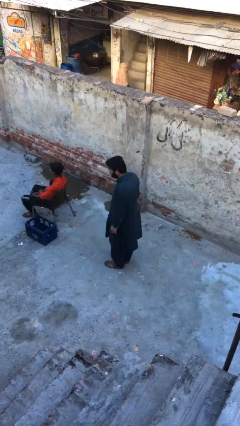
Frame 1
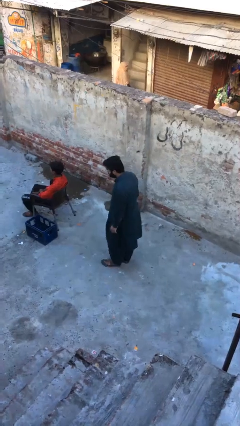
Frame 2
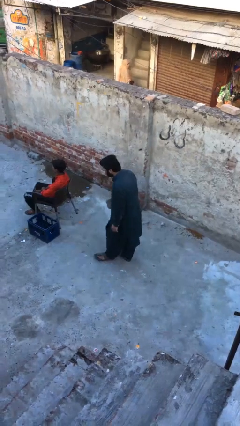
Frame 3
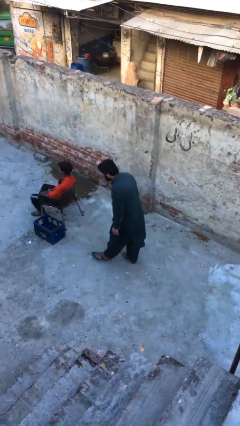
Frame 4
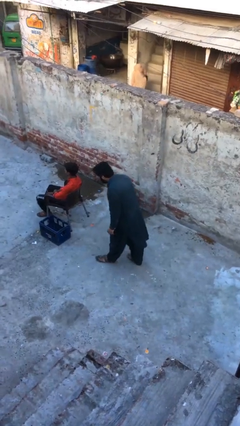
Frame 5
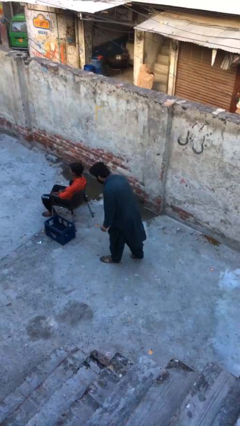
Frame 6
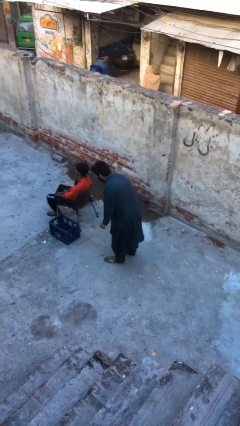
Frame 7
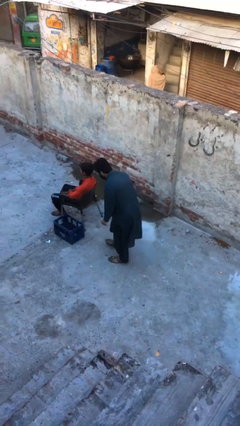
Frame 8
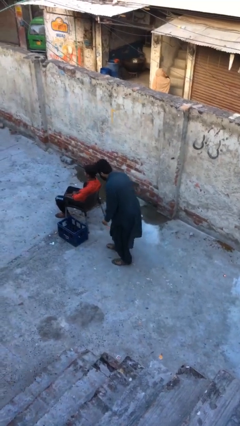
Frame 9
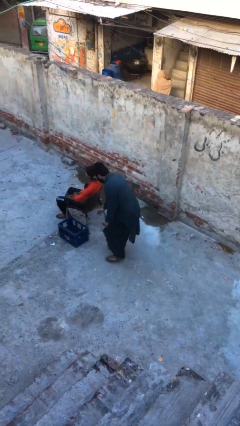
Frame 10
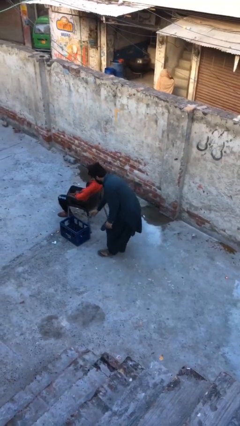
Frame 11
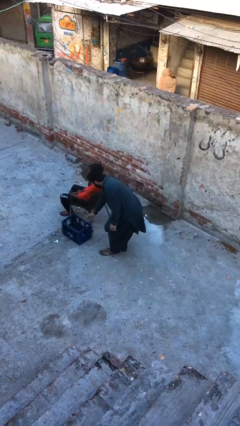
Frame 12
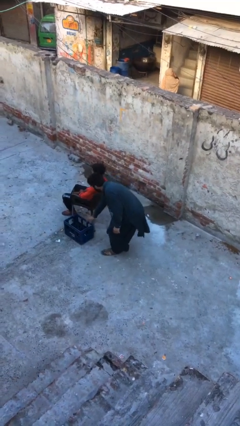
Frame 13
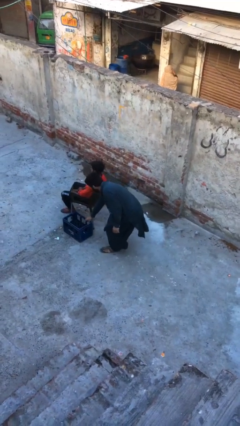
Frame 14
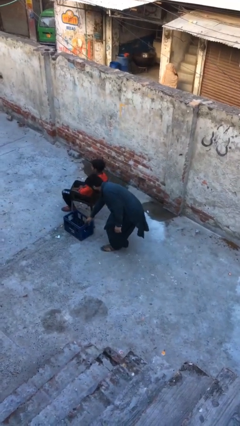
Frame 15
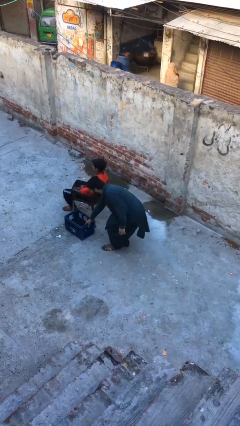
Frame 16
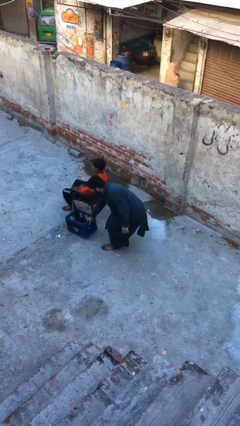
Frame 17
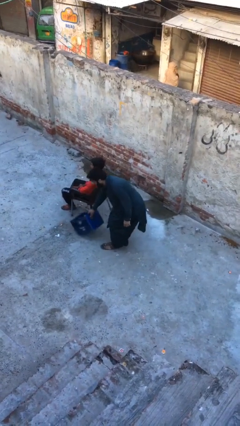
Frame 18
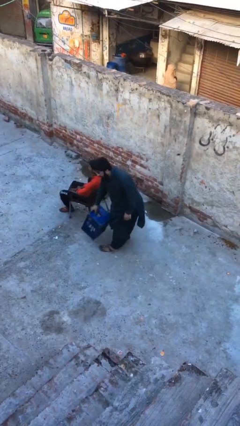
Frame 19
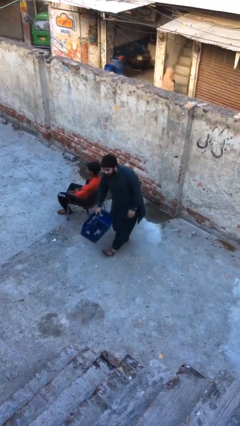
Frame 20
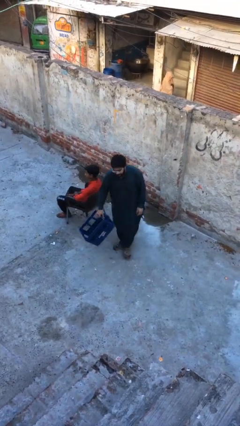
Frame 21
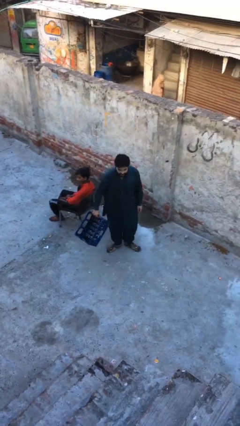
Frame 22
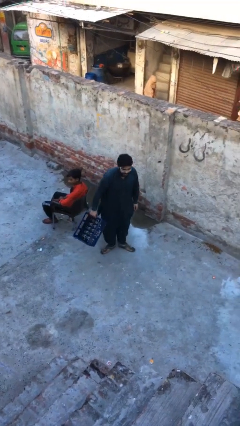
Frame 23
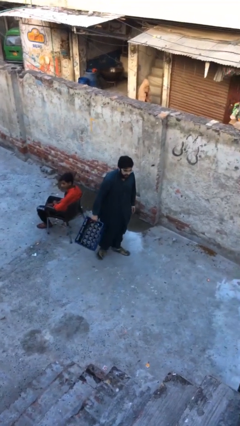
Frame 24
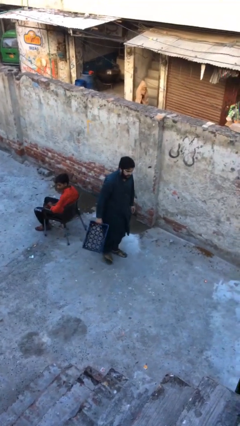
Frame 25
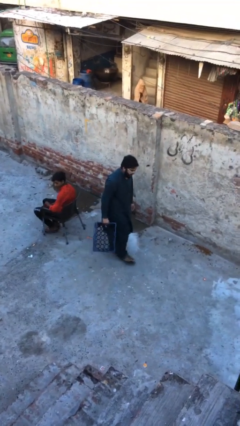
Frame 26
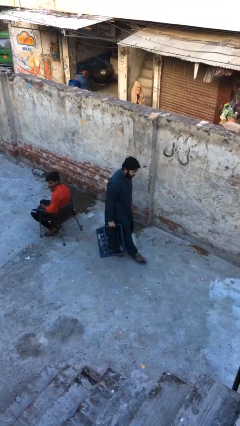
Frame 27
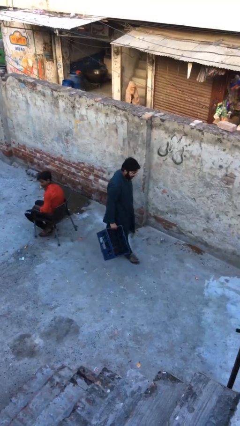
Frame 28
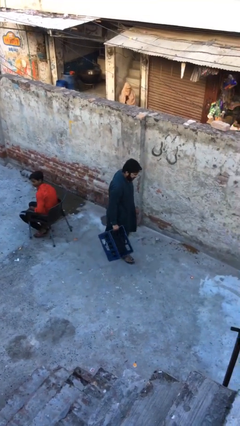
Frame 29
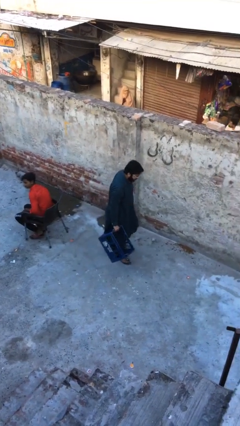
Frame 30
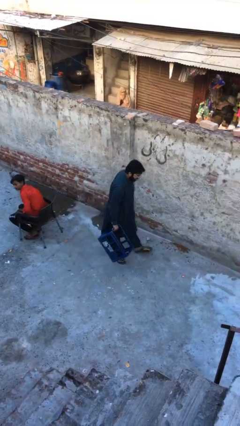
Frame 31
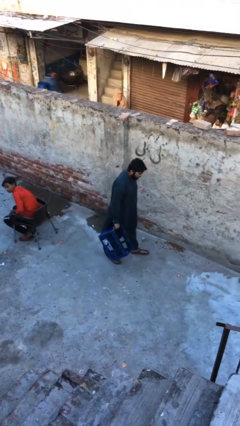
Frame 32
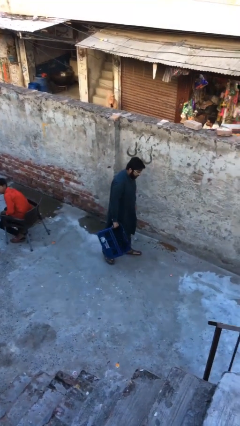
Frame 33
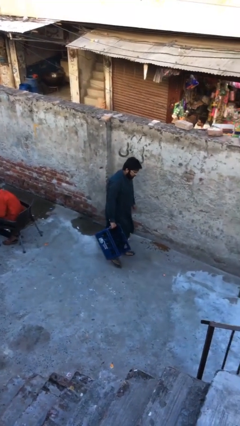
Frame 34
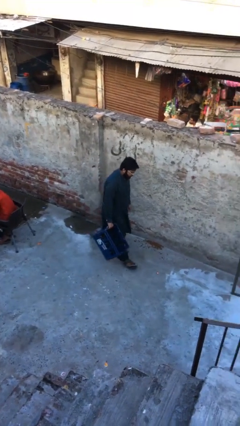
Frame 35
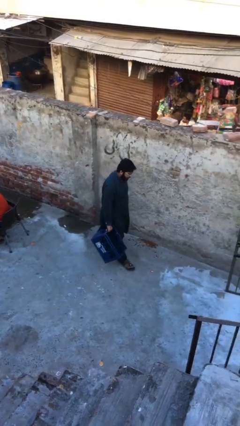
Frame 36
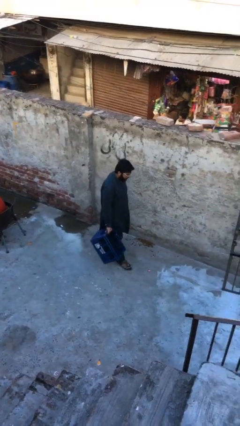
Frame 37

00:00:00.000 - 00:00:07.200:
person steals object from person

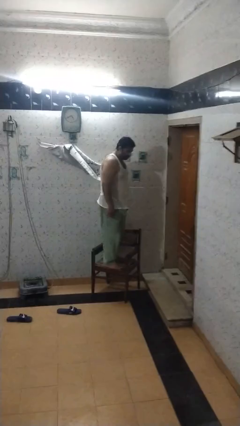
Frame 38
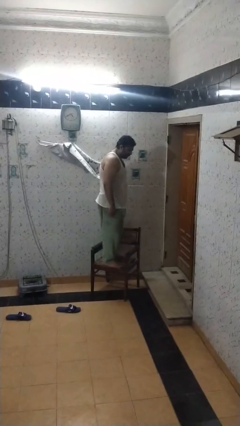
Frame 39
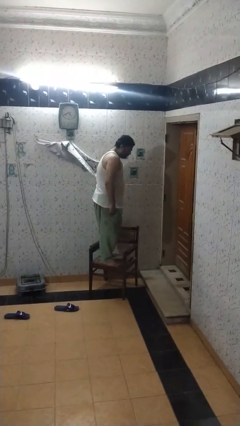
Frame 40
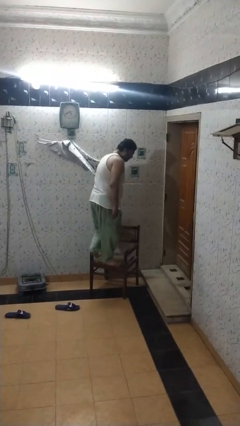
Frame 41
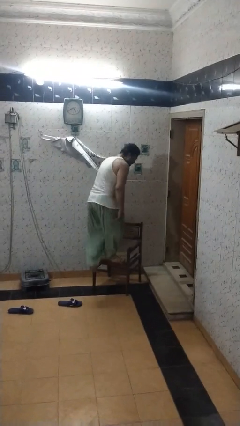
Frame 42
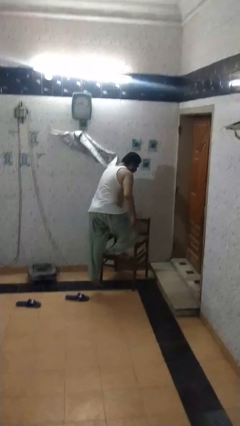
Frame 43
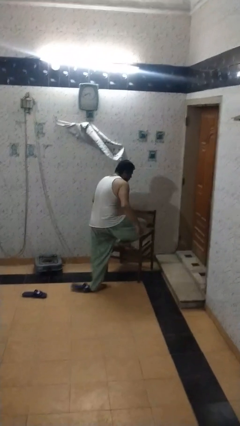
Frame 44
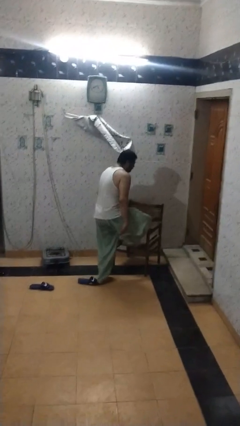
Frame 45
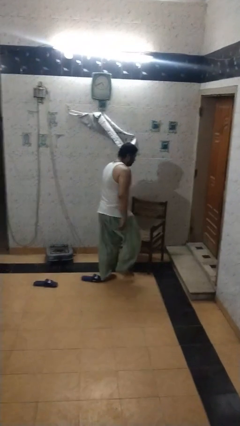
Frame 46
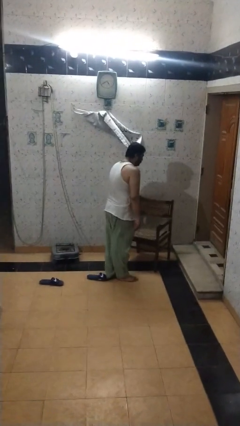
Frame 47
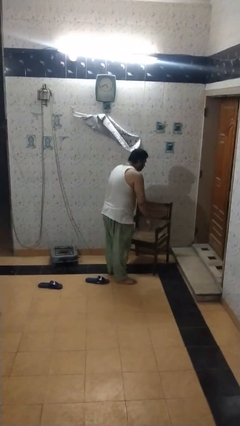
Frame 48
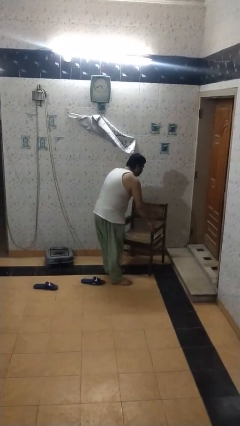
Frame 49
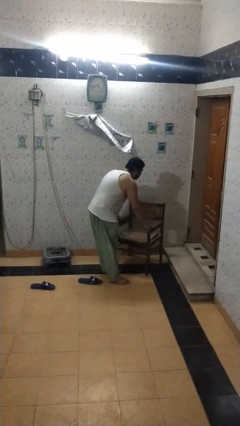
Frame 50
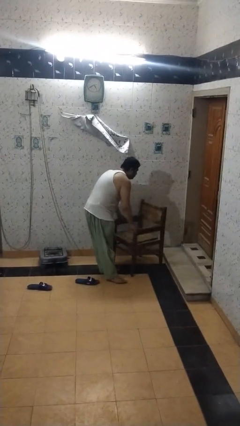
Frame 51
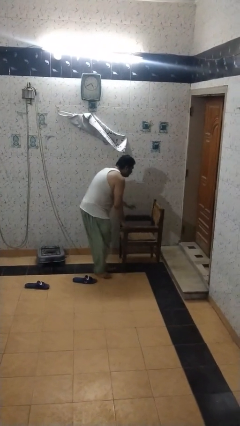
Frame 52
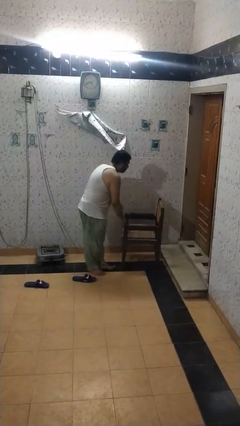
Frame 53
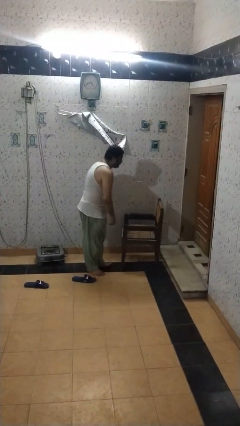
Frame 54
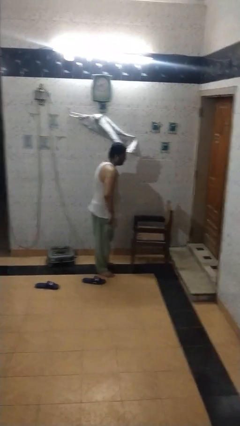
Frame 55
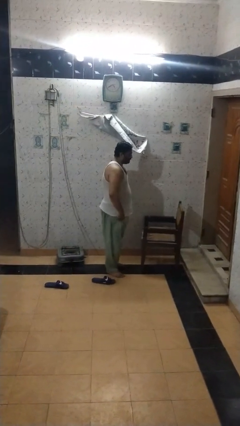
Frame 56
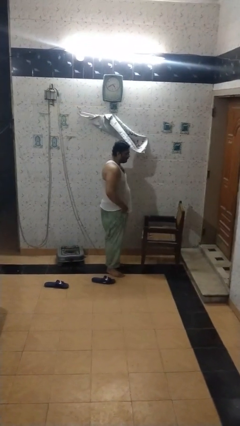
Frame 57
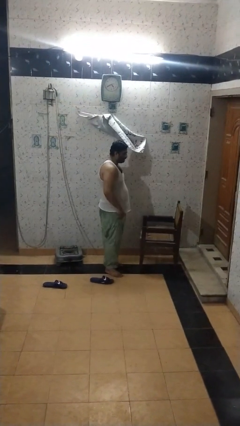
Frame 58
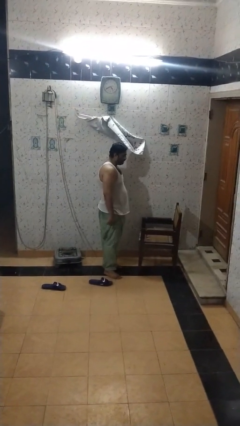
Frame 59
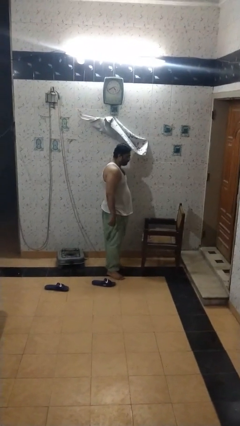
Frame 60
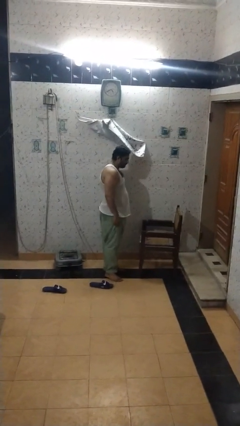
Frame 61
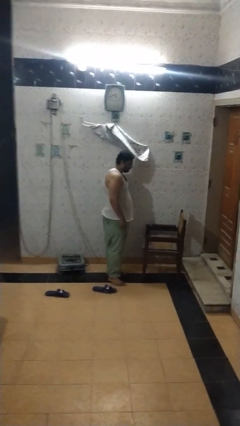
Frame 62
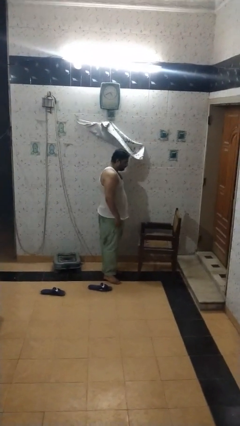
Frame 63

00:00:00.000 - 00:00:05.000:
person climbs off chair

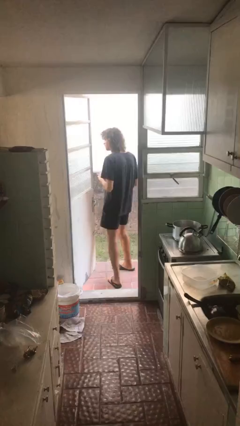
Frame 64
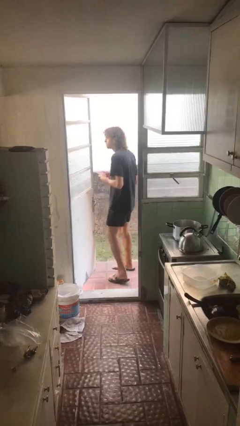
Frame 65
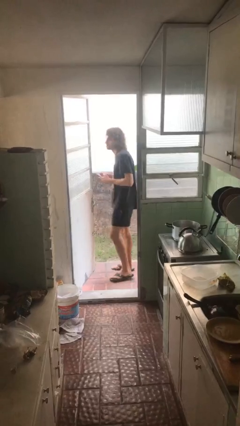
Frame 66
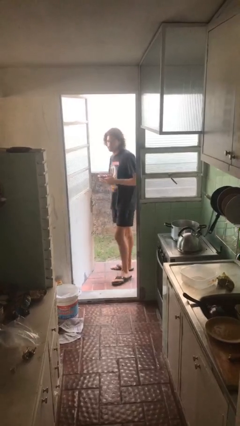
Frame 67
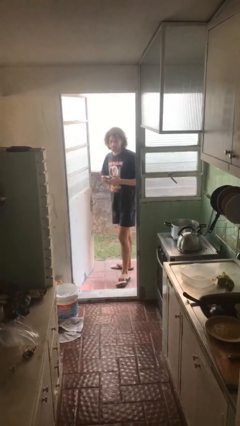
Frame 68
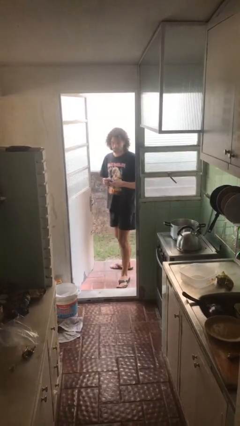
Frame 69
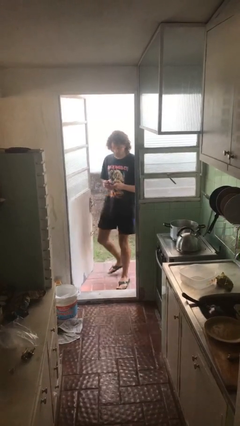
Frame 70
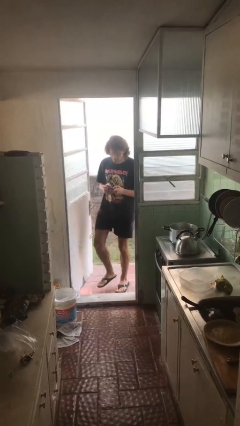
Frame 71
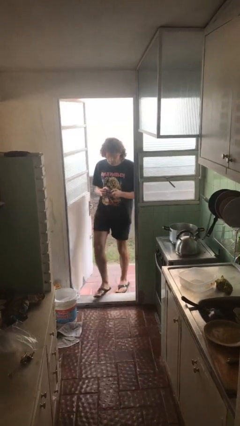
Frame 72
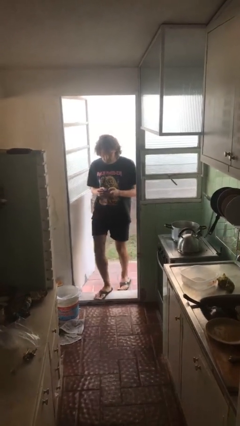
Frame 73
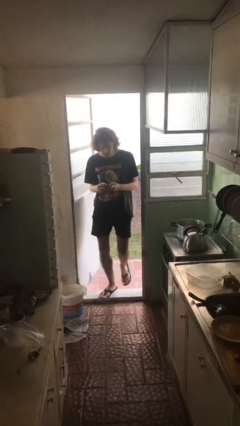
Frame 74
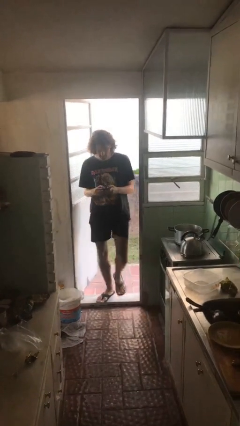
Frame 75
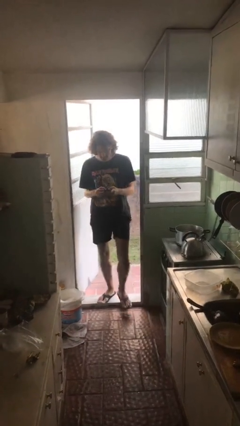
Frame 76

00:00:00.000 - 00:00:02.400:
person enters scene through structure

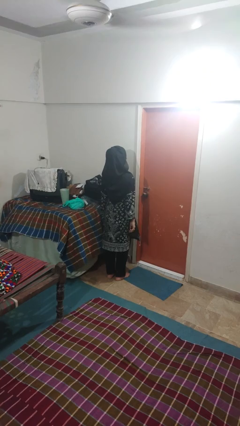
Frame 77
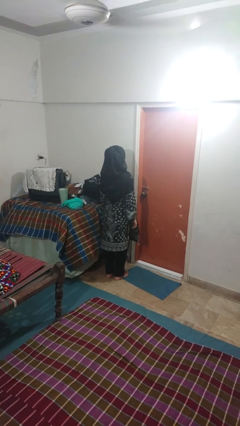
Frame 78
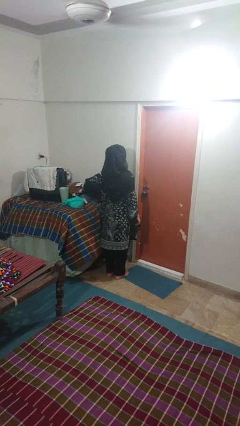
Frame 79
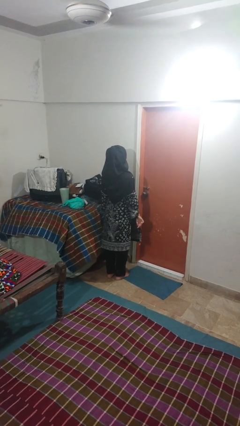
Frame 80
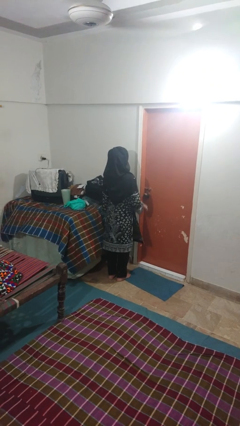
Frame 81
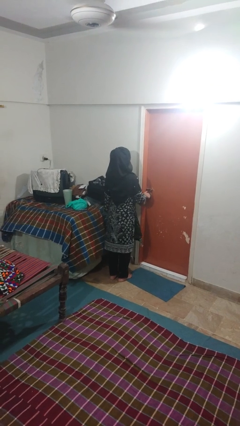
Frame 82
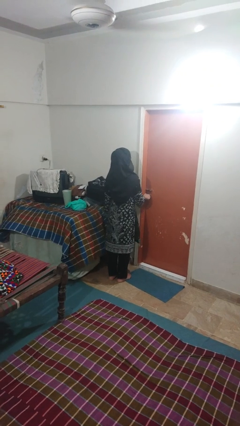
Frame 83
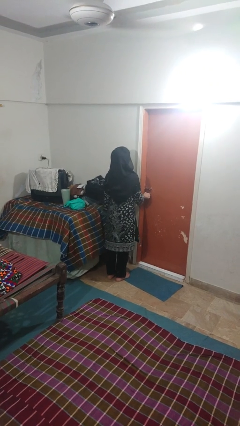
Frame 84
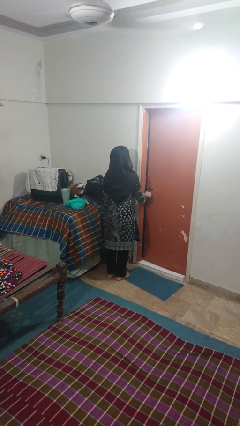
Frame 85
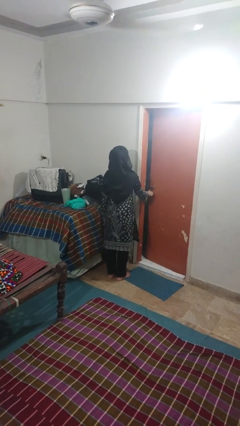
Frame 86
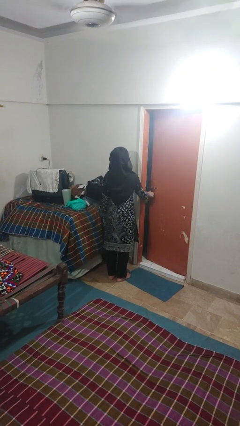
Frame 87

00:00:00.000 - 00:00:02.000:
person opens facility door

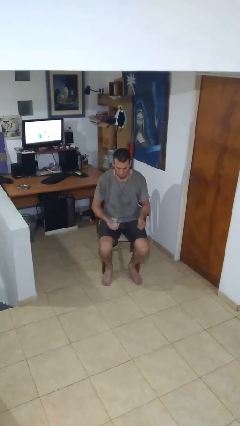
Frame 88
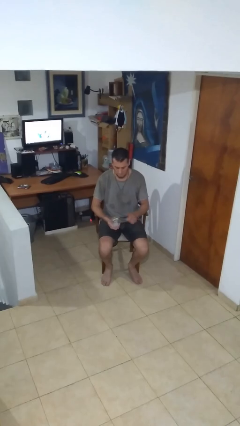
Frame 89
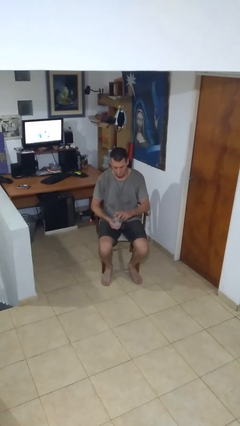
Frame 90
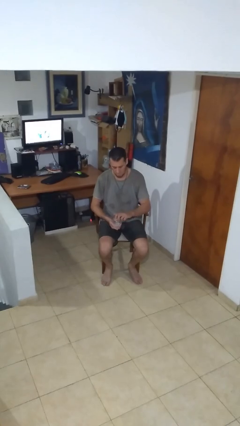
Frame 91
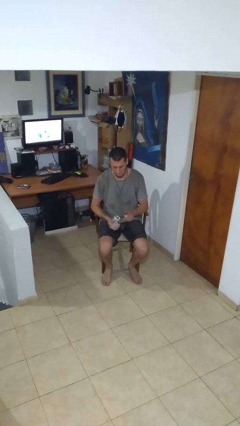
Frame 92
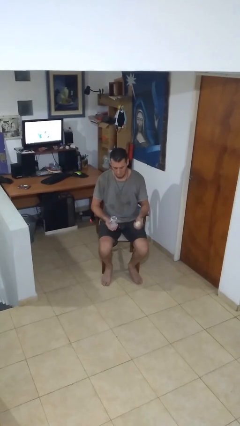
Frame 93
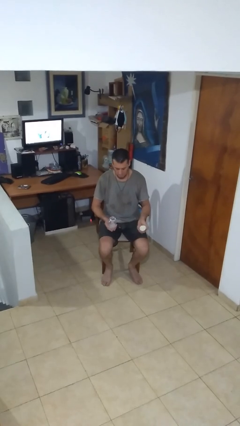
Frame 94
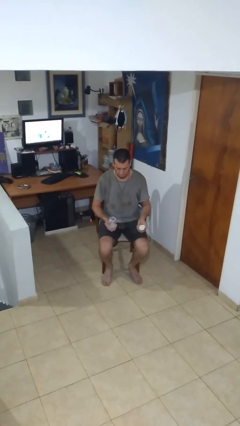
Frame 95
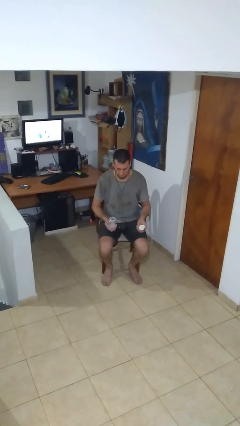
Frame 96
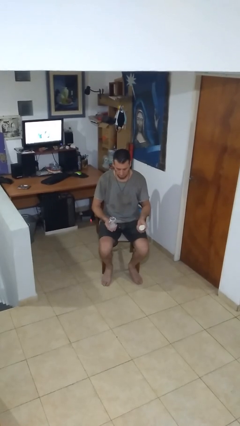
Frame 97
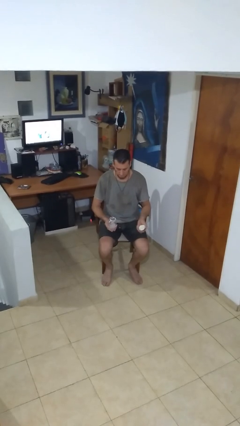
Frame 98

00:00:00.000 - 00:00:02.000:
person opens jar
